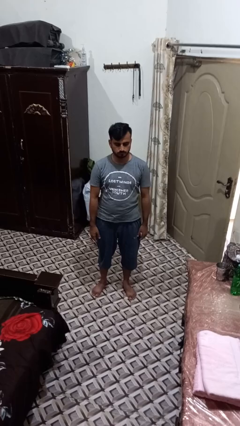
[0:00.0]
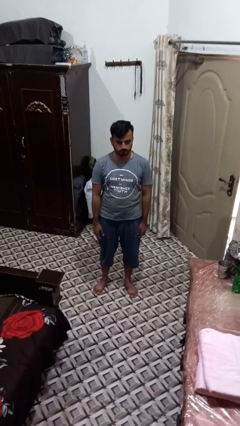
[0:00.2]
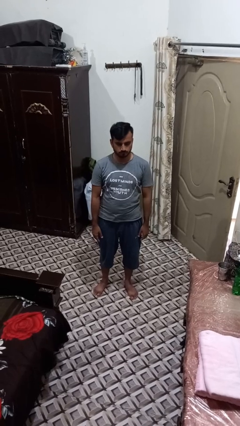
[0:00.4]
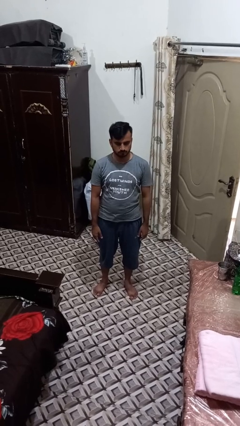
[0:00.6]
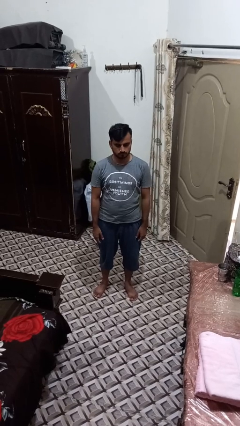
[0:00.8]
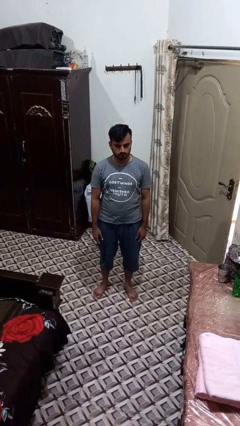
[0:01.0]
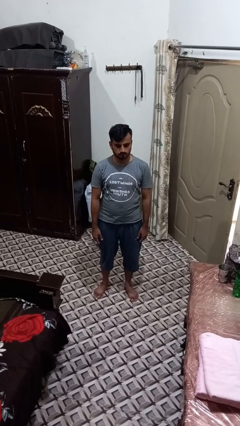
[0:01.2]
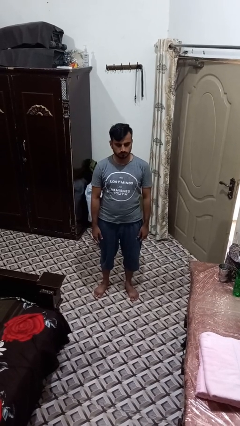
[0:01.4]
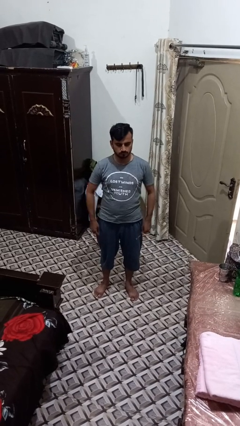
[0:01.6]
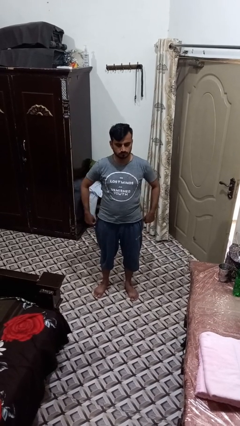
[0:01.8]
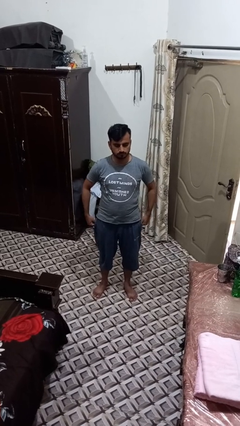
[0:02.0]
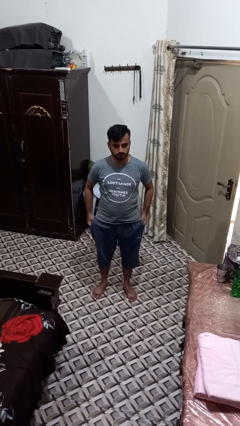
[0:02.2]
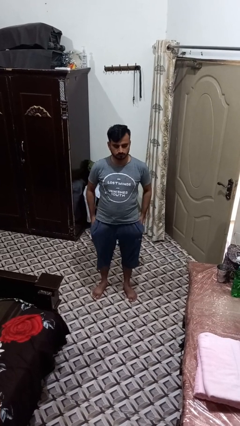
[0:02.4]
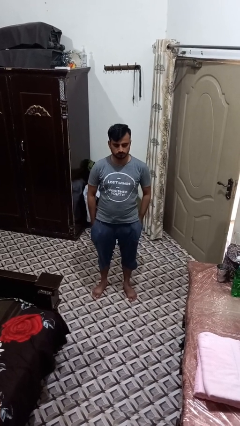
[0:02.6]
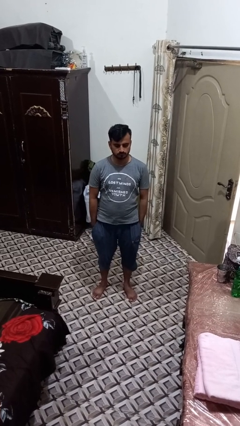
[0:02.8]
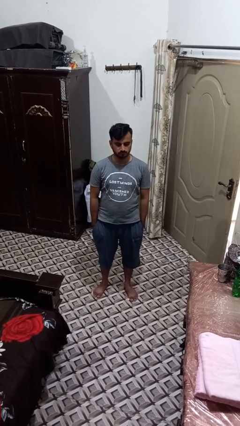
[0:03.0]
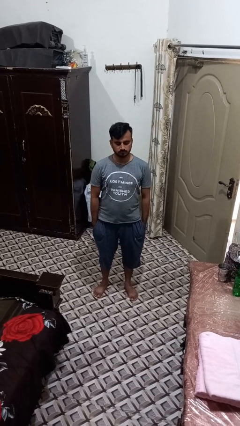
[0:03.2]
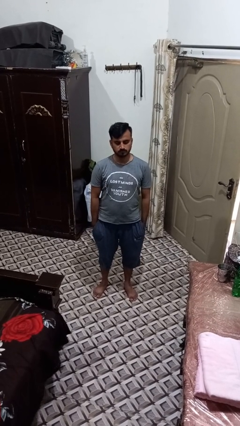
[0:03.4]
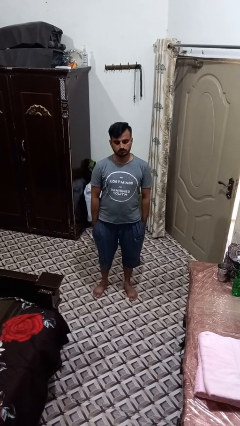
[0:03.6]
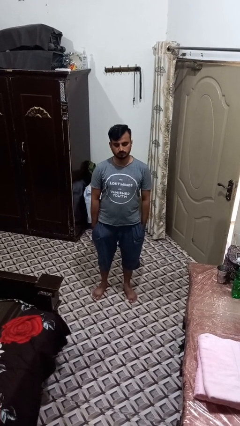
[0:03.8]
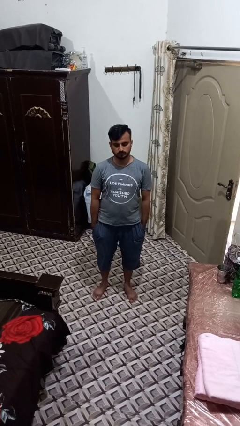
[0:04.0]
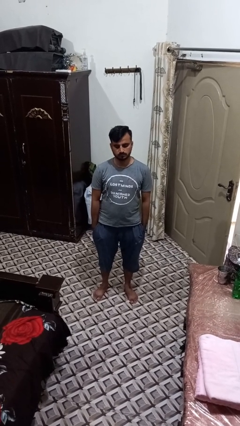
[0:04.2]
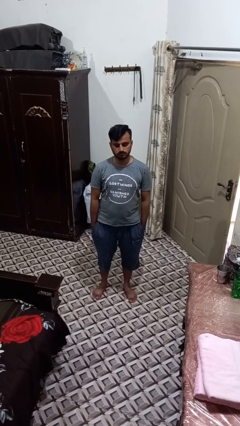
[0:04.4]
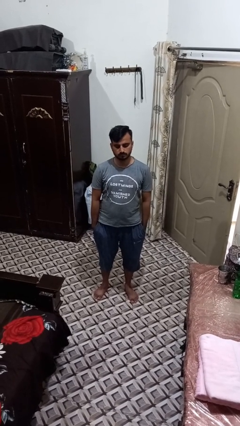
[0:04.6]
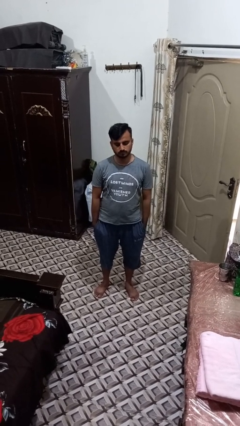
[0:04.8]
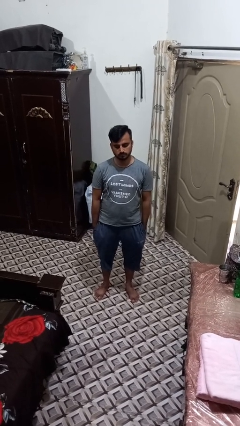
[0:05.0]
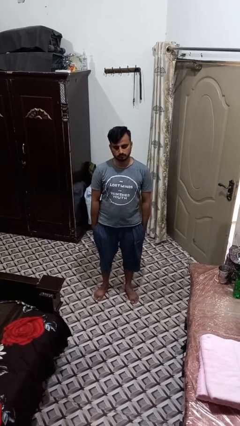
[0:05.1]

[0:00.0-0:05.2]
person puts hands in back pockets

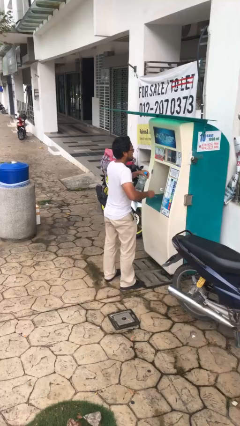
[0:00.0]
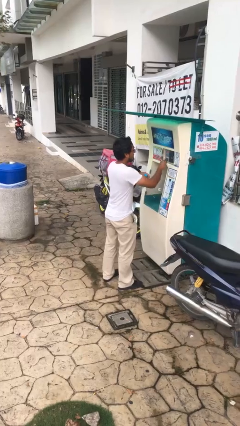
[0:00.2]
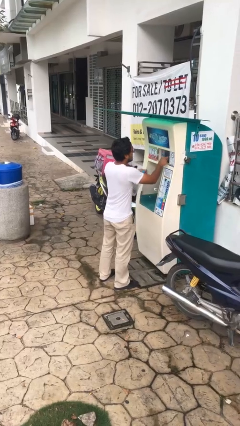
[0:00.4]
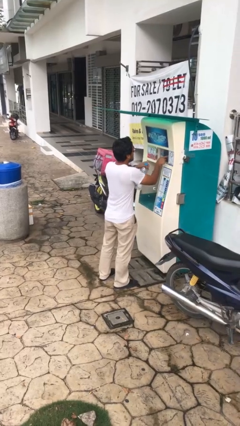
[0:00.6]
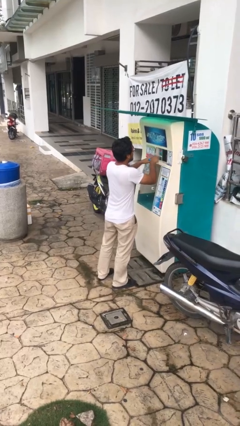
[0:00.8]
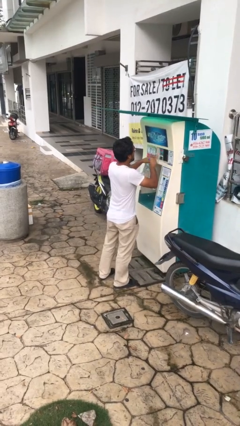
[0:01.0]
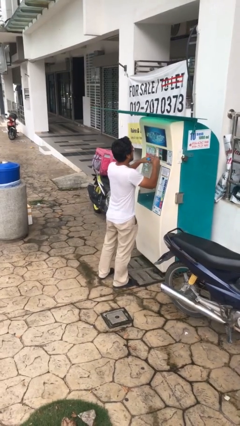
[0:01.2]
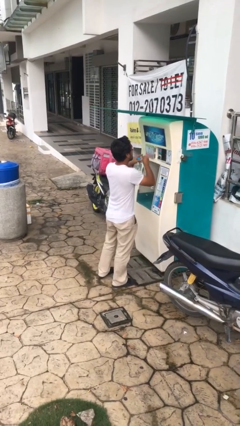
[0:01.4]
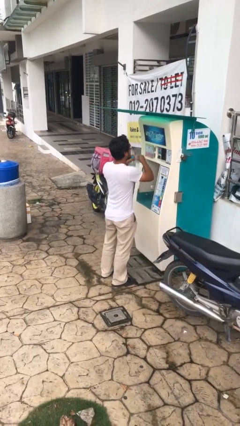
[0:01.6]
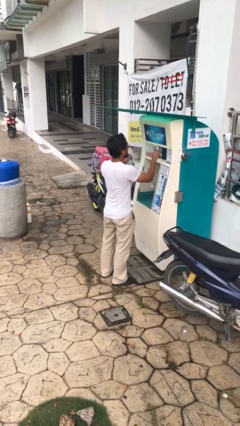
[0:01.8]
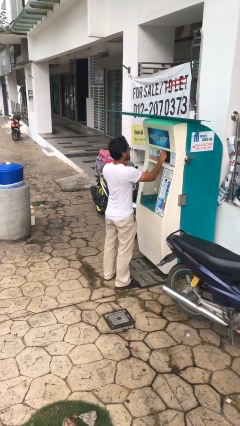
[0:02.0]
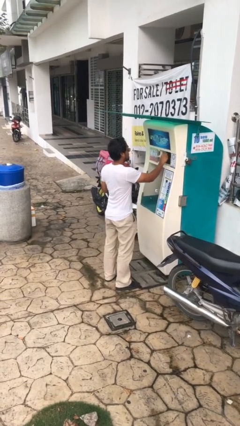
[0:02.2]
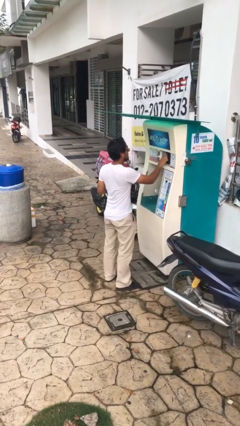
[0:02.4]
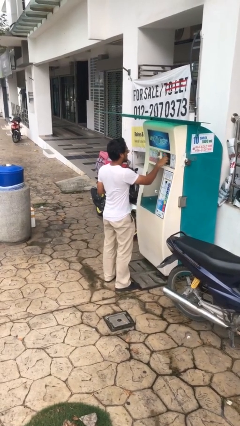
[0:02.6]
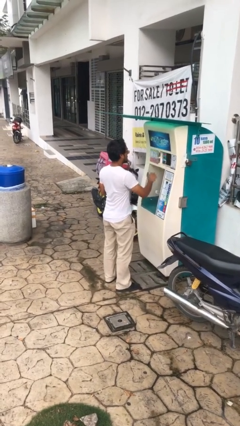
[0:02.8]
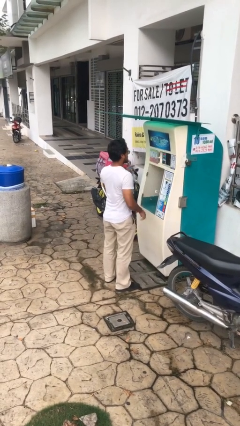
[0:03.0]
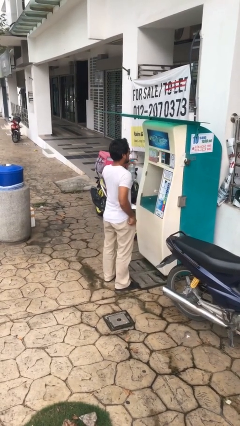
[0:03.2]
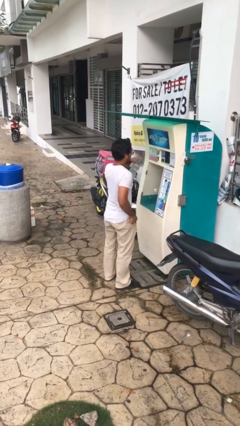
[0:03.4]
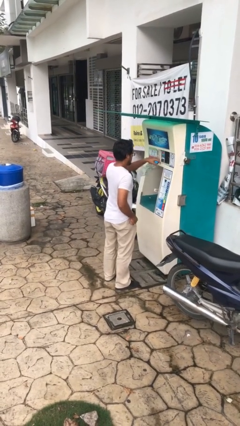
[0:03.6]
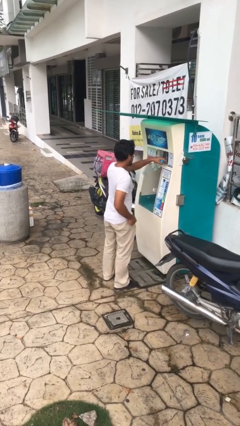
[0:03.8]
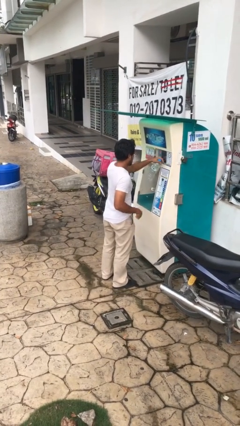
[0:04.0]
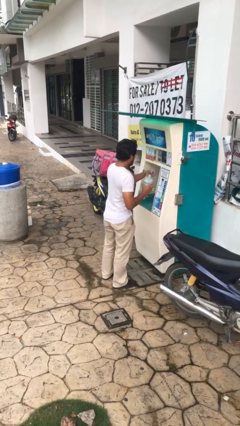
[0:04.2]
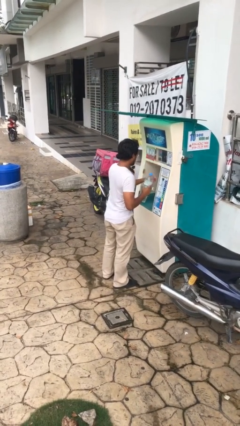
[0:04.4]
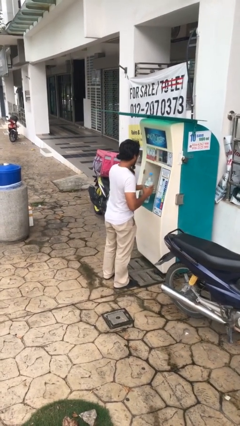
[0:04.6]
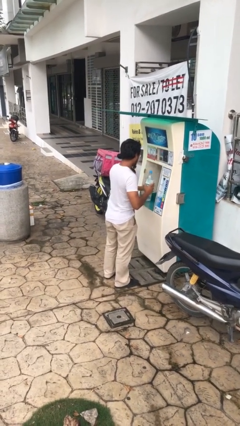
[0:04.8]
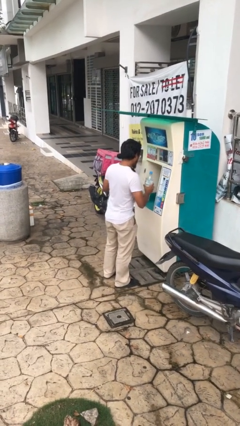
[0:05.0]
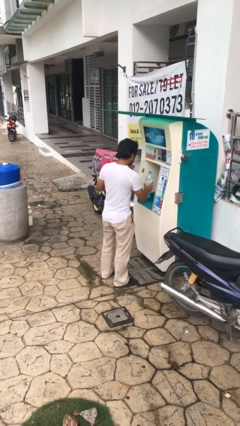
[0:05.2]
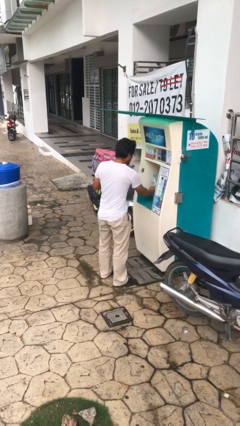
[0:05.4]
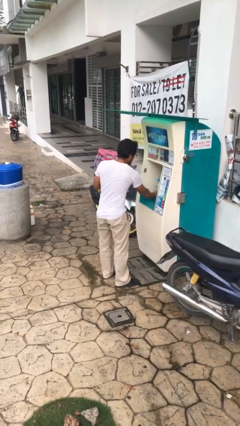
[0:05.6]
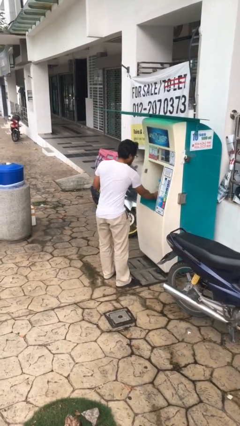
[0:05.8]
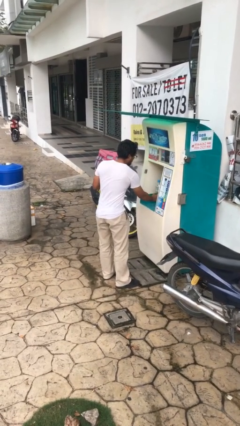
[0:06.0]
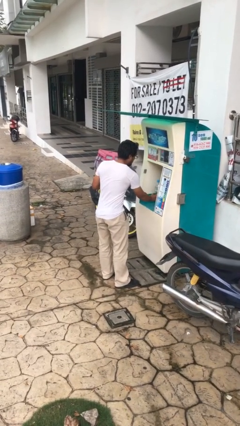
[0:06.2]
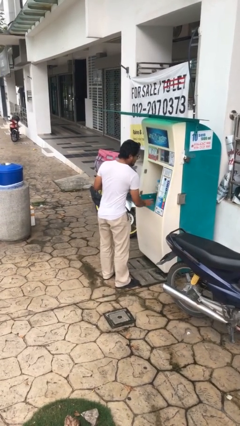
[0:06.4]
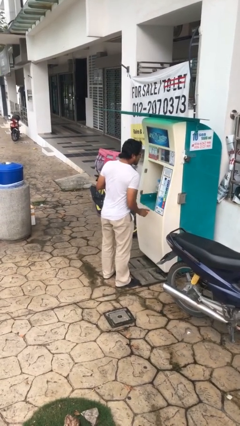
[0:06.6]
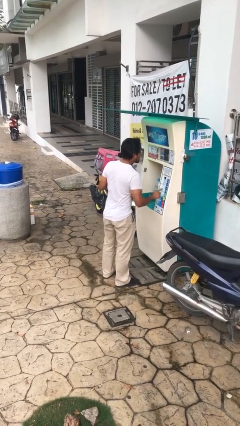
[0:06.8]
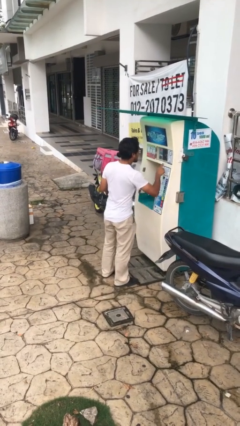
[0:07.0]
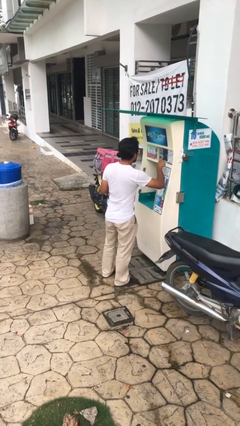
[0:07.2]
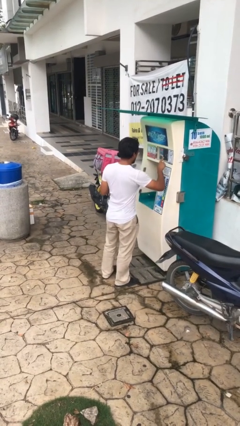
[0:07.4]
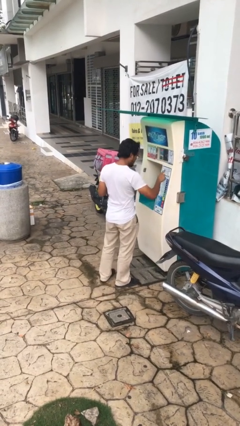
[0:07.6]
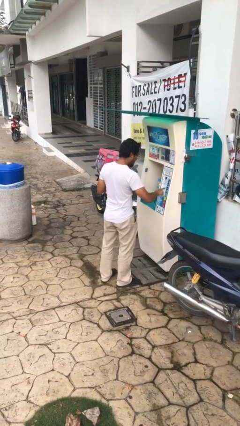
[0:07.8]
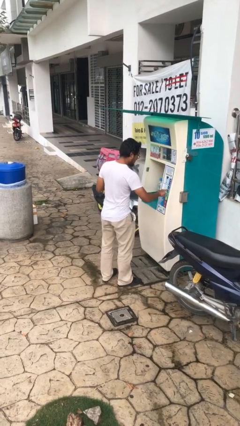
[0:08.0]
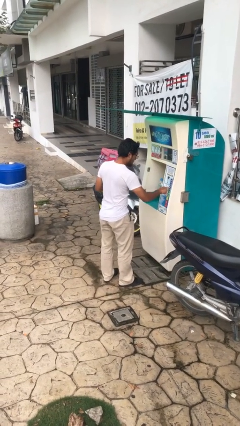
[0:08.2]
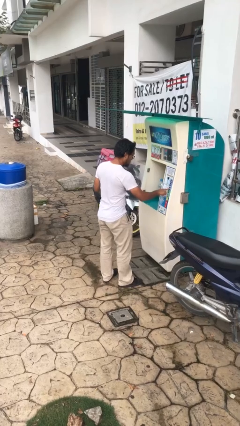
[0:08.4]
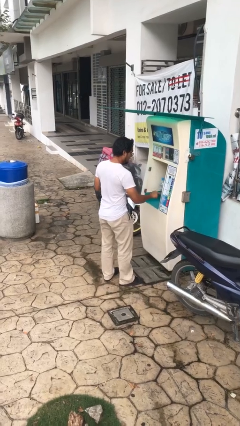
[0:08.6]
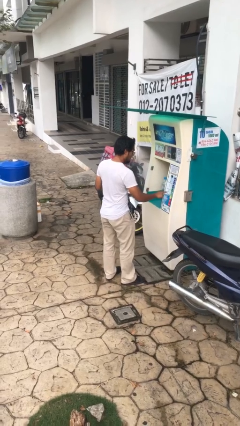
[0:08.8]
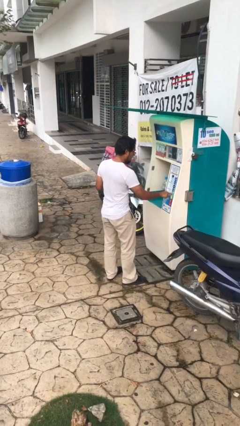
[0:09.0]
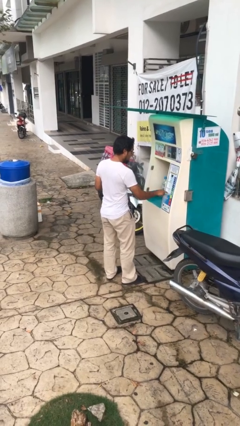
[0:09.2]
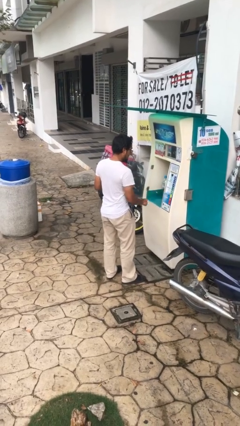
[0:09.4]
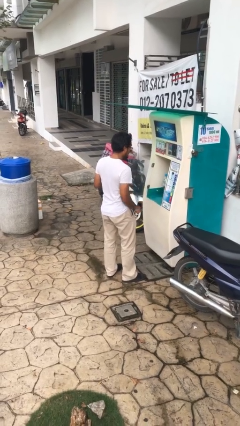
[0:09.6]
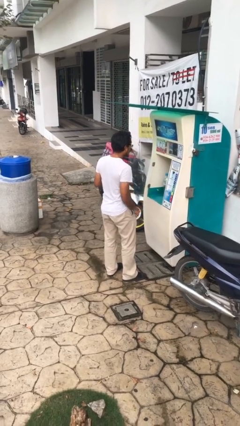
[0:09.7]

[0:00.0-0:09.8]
person purchases from machine

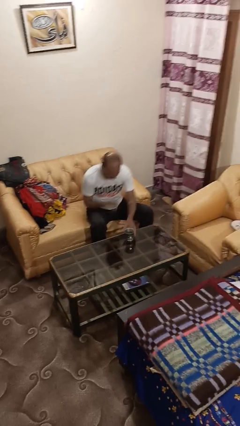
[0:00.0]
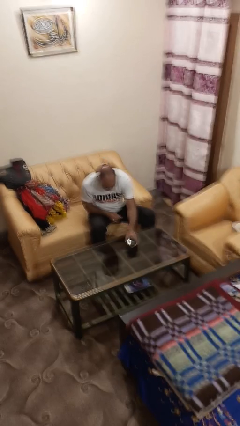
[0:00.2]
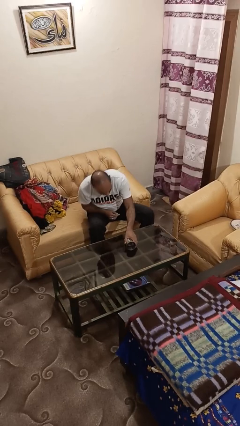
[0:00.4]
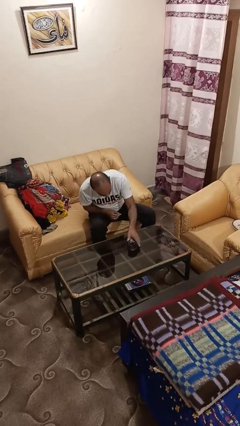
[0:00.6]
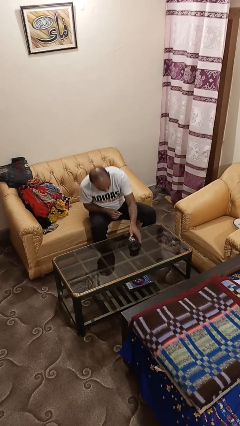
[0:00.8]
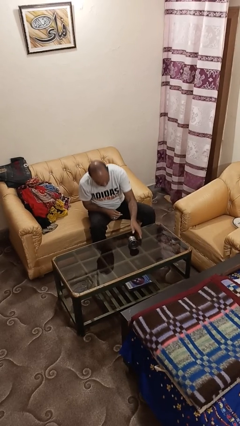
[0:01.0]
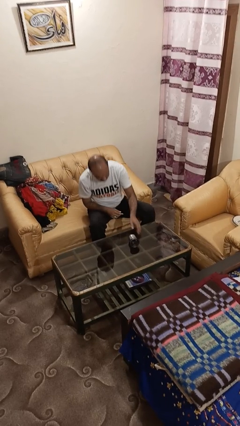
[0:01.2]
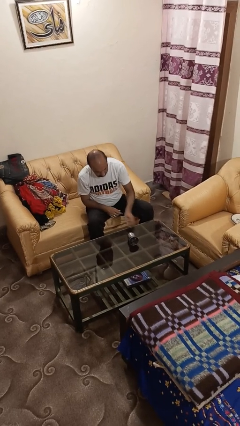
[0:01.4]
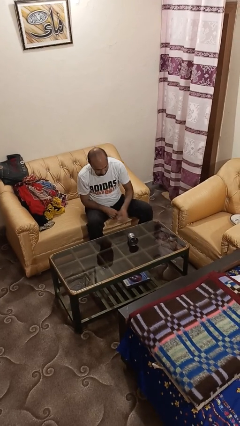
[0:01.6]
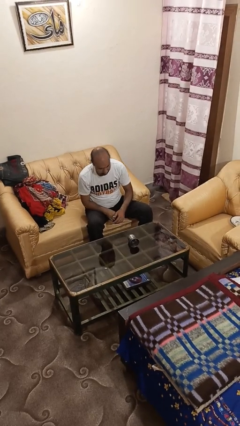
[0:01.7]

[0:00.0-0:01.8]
person knocks over glass

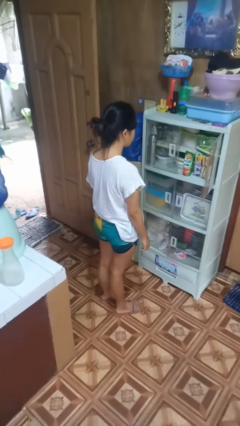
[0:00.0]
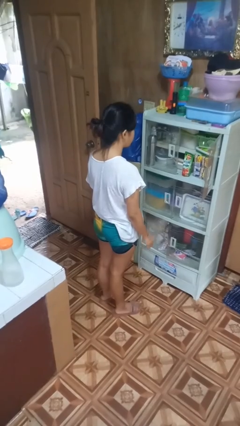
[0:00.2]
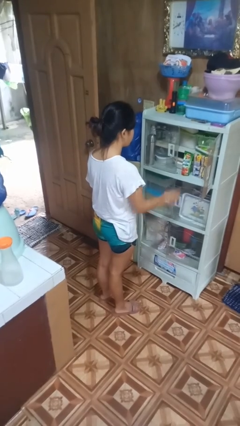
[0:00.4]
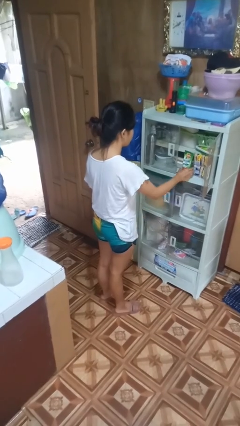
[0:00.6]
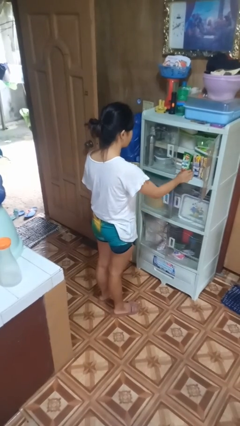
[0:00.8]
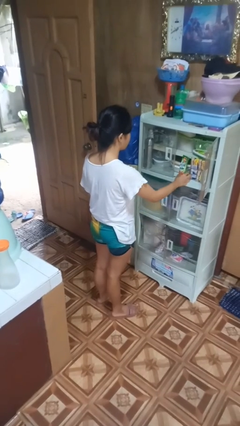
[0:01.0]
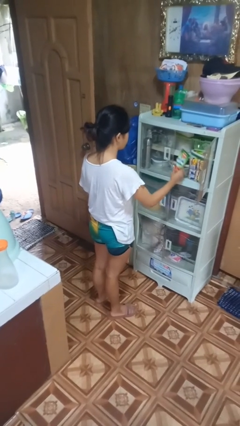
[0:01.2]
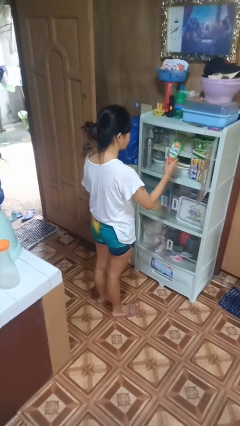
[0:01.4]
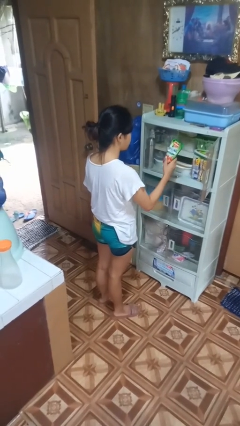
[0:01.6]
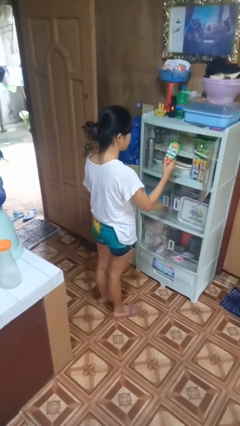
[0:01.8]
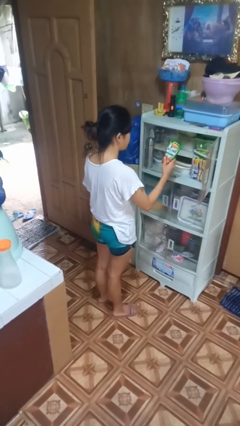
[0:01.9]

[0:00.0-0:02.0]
person picks up object from cabinet
